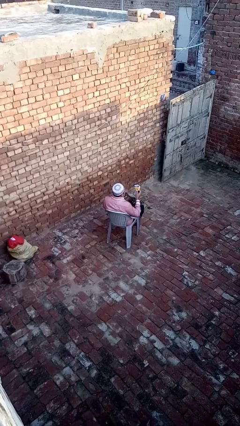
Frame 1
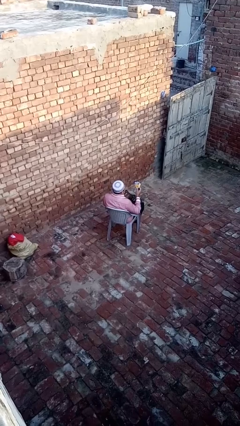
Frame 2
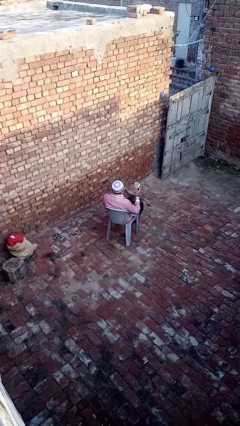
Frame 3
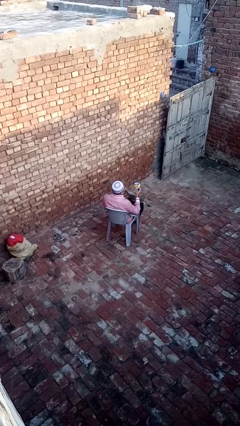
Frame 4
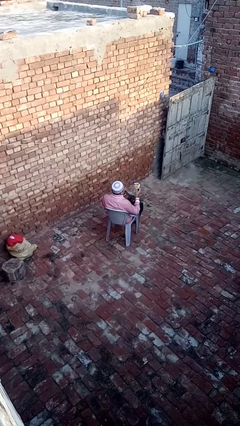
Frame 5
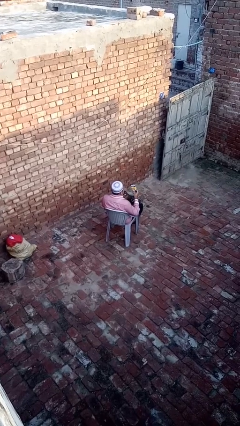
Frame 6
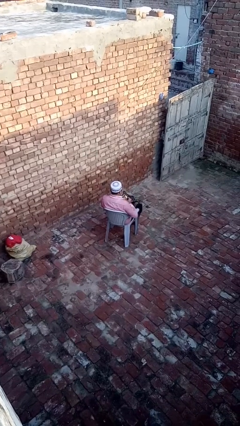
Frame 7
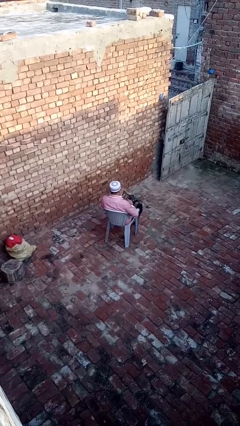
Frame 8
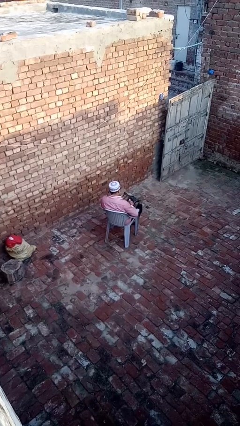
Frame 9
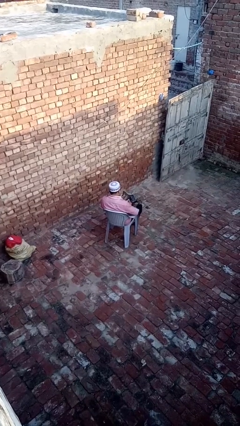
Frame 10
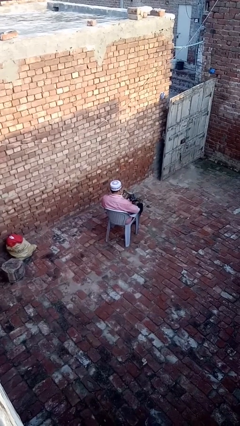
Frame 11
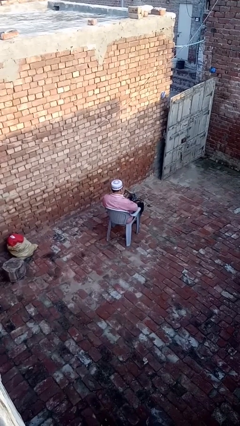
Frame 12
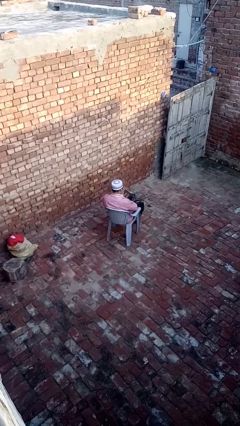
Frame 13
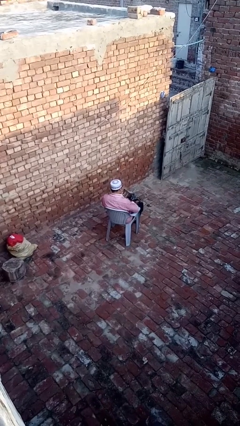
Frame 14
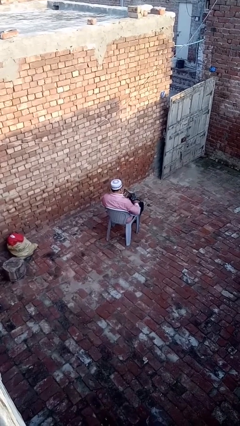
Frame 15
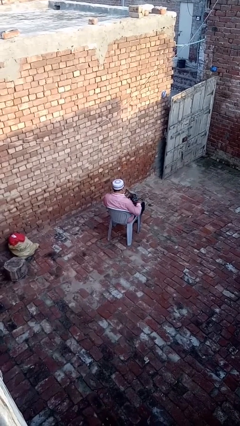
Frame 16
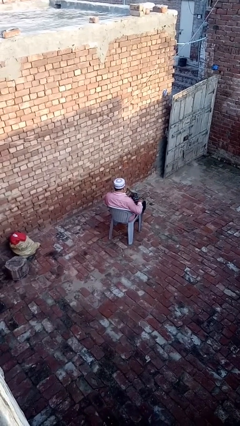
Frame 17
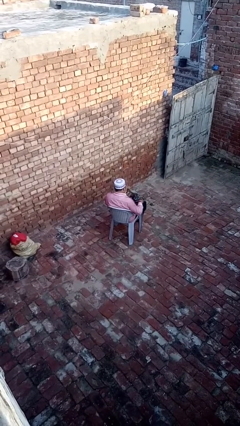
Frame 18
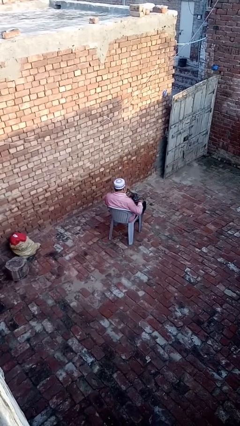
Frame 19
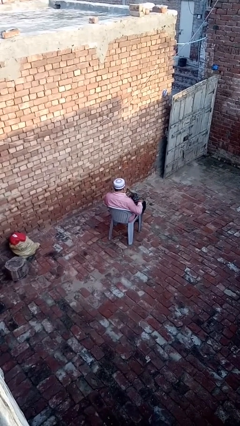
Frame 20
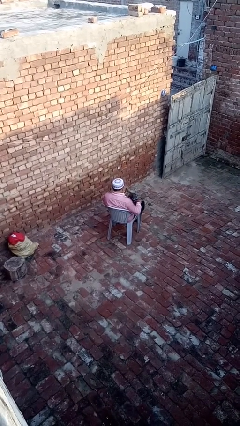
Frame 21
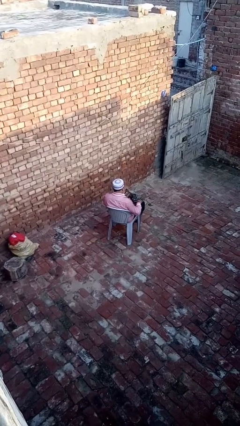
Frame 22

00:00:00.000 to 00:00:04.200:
person puts object into purse

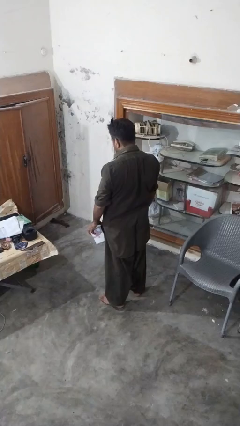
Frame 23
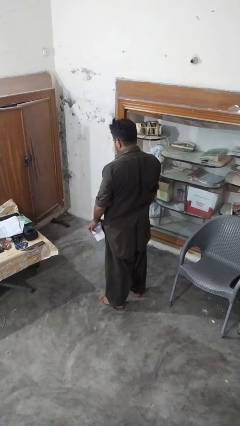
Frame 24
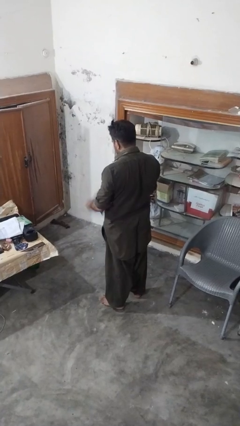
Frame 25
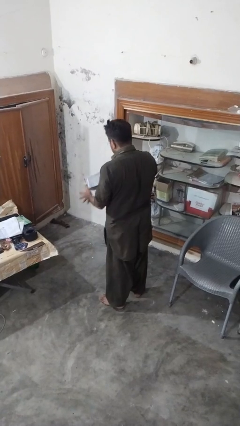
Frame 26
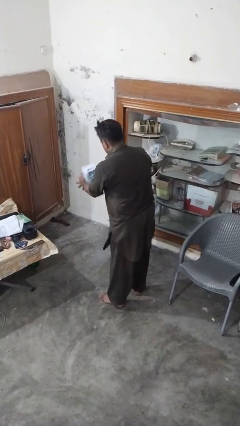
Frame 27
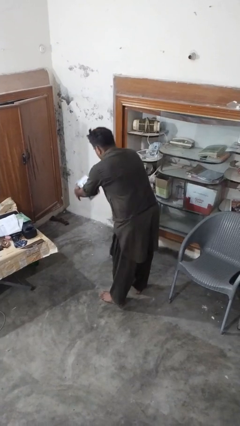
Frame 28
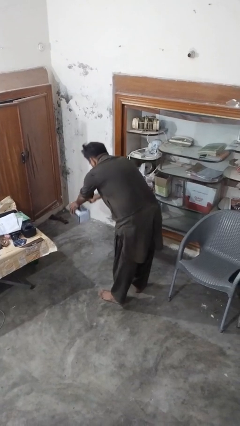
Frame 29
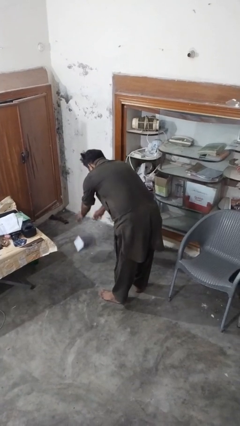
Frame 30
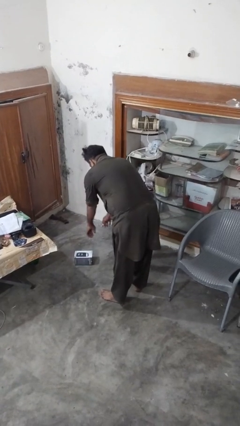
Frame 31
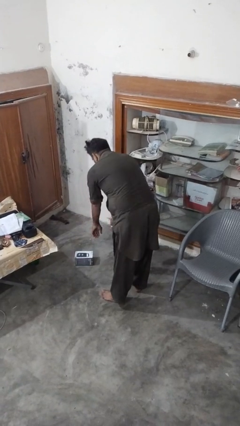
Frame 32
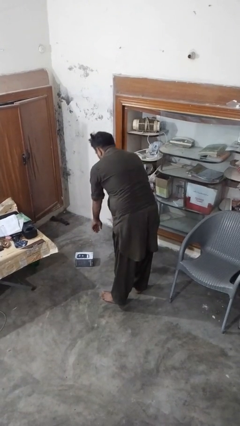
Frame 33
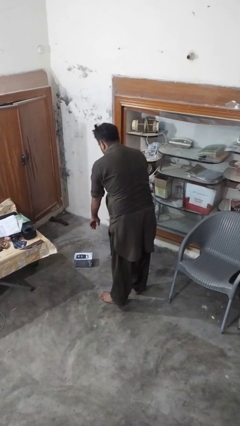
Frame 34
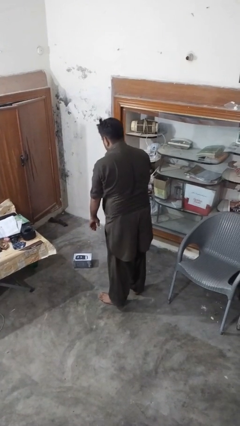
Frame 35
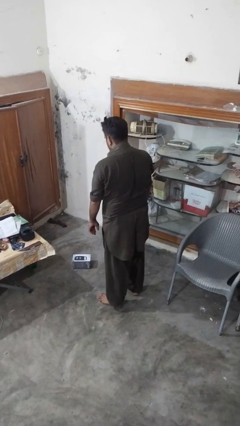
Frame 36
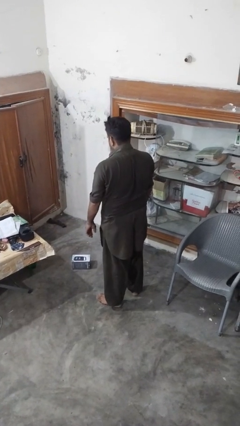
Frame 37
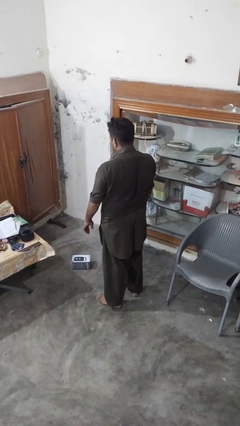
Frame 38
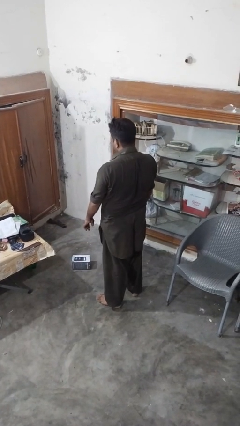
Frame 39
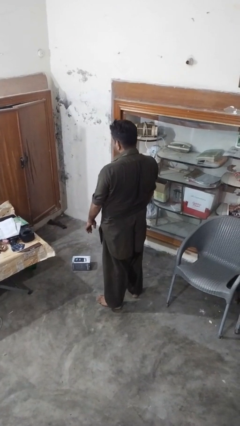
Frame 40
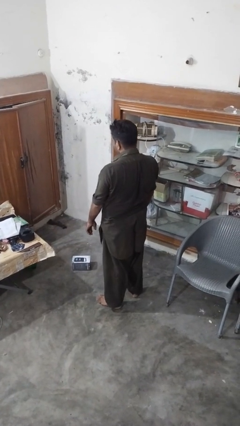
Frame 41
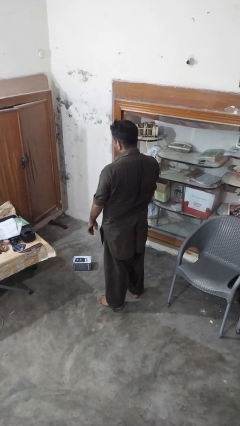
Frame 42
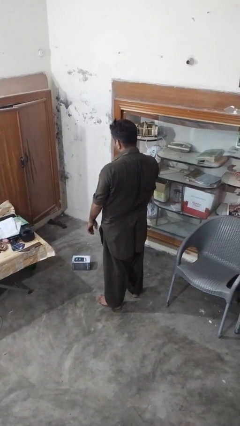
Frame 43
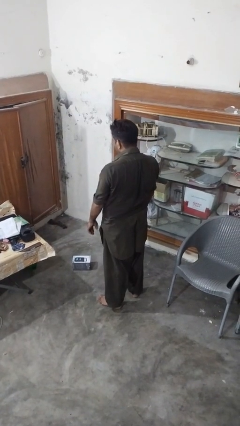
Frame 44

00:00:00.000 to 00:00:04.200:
person drops object

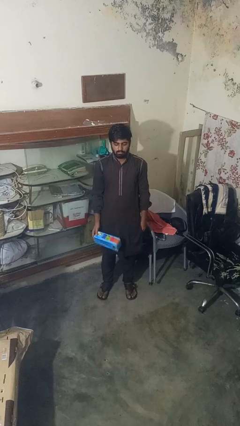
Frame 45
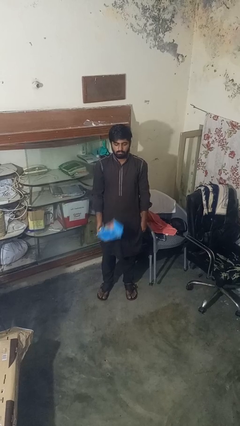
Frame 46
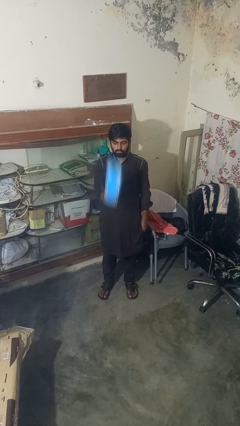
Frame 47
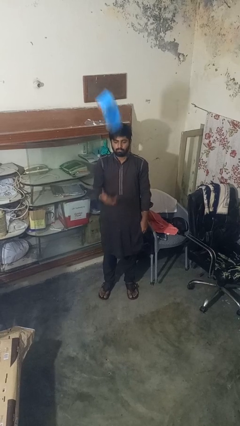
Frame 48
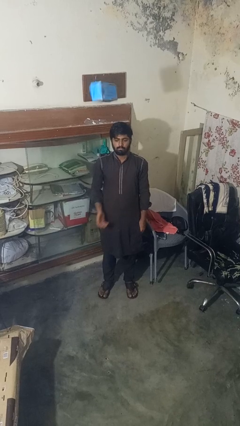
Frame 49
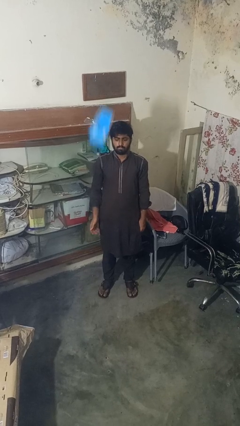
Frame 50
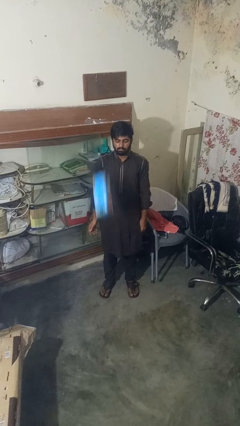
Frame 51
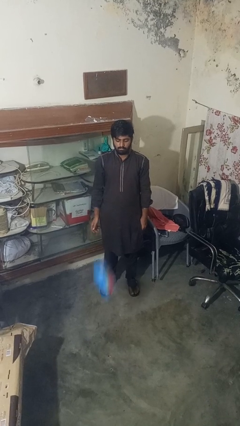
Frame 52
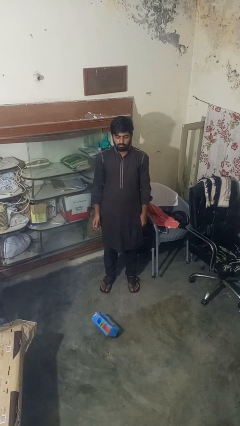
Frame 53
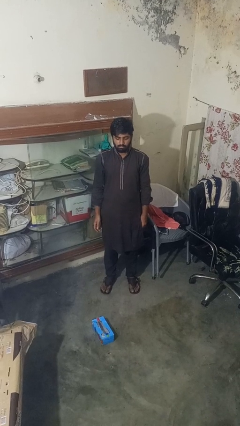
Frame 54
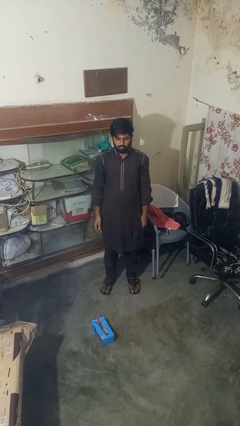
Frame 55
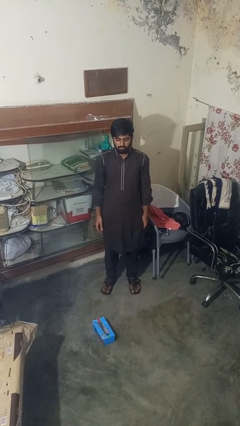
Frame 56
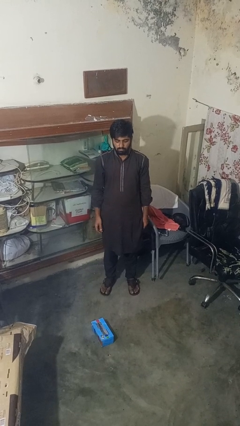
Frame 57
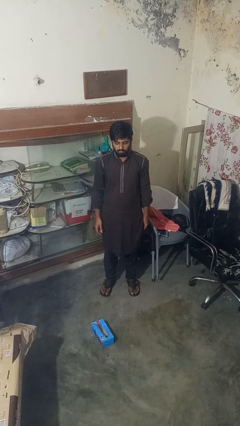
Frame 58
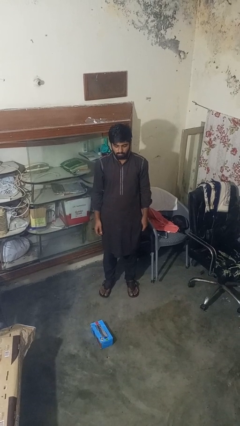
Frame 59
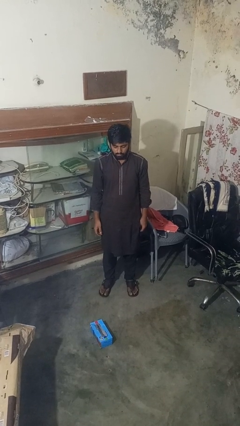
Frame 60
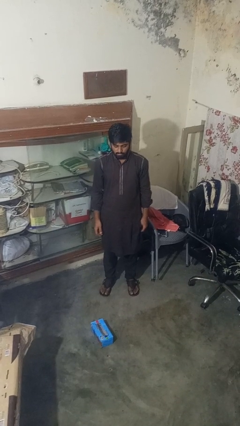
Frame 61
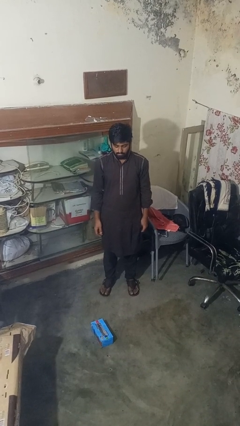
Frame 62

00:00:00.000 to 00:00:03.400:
person throws object into air

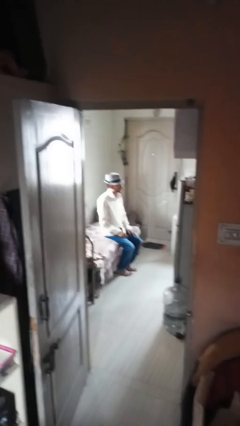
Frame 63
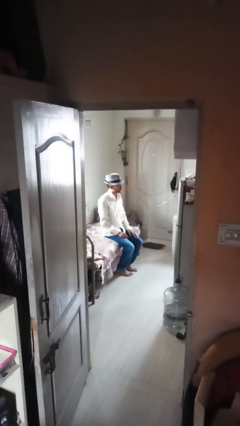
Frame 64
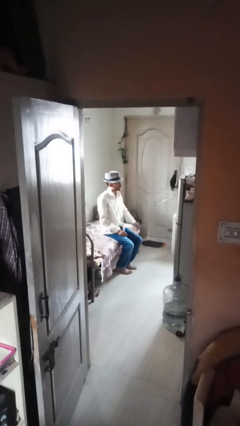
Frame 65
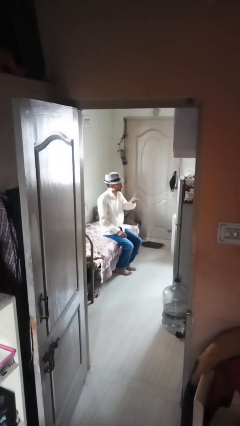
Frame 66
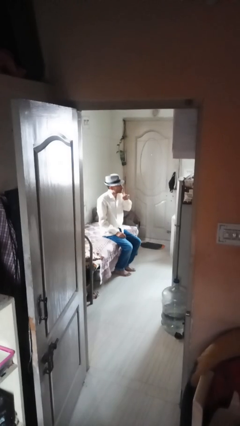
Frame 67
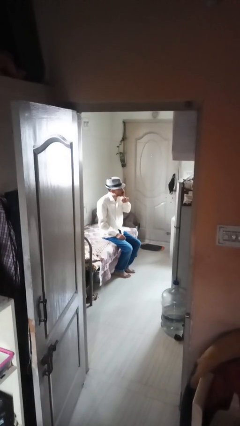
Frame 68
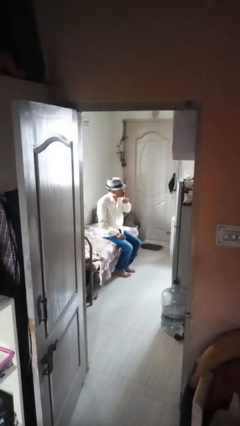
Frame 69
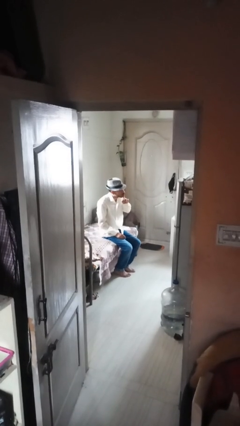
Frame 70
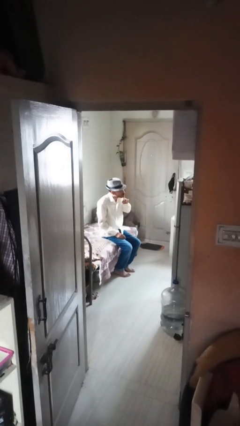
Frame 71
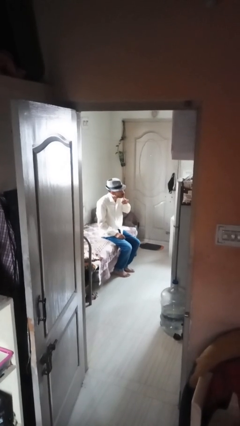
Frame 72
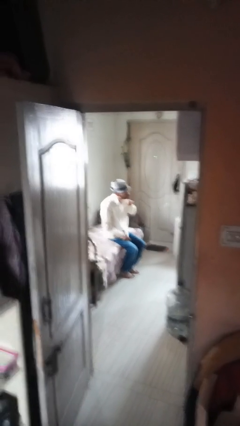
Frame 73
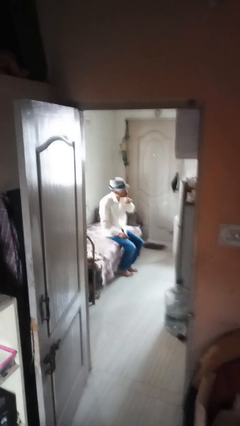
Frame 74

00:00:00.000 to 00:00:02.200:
person gestures be quiet

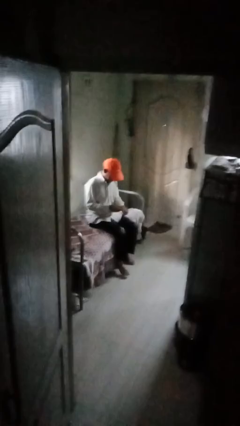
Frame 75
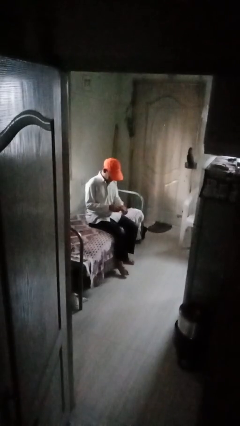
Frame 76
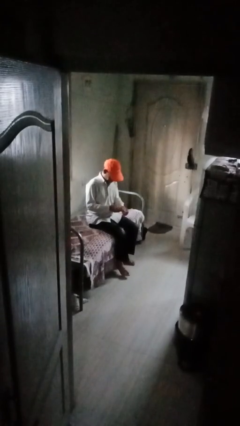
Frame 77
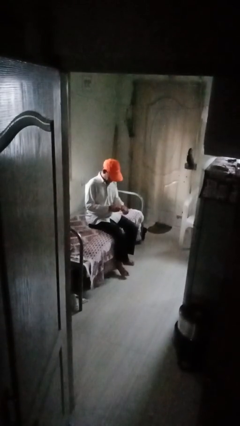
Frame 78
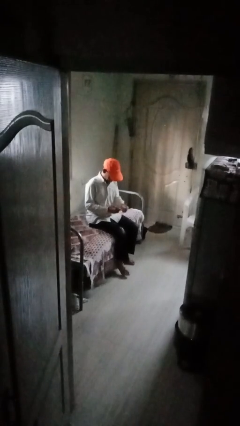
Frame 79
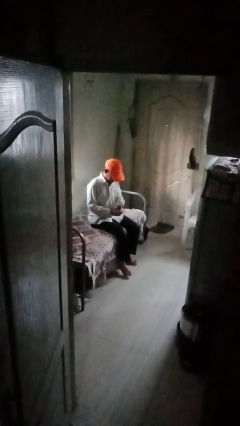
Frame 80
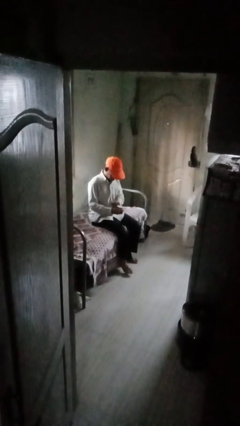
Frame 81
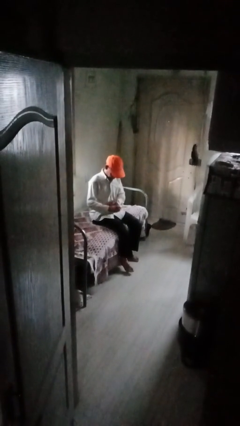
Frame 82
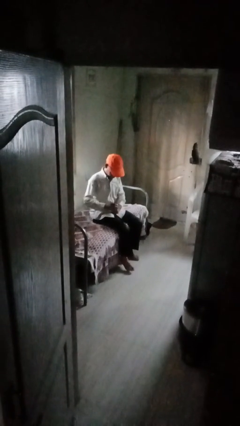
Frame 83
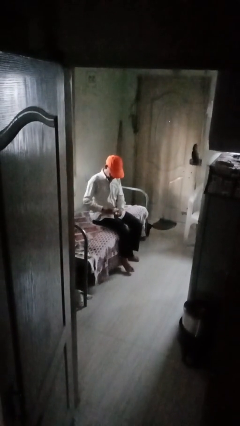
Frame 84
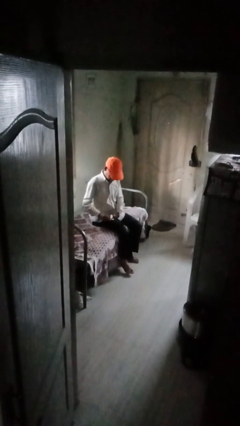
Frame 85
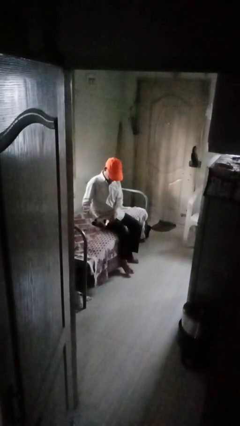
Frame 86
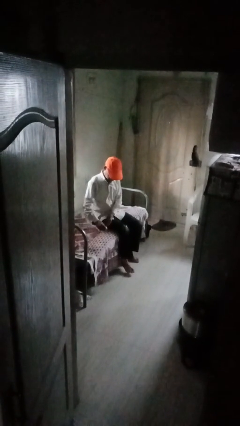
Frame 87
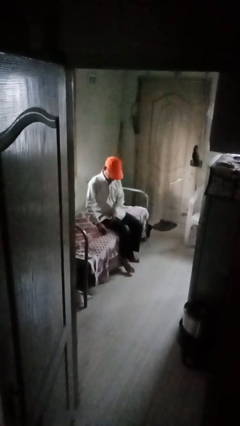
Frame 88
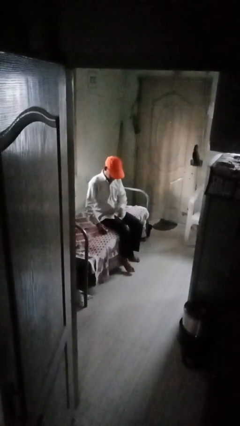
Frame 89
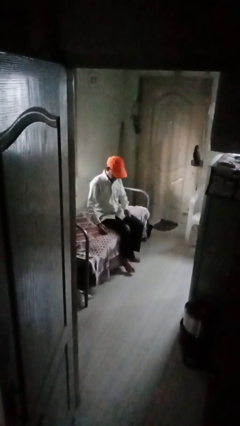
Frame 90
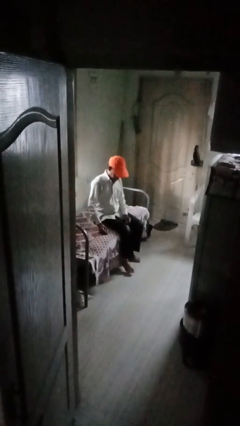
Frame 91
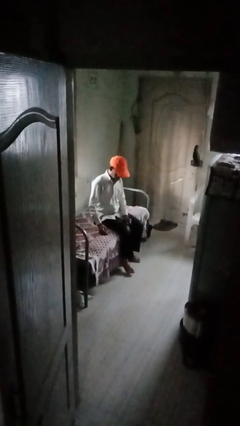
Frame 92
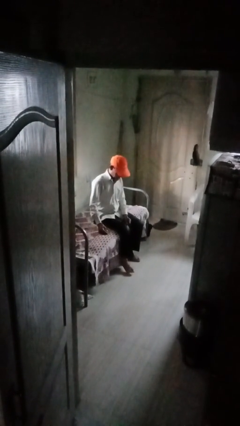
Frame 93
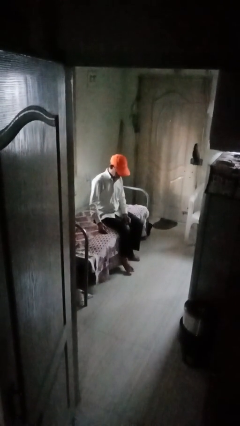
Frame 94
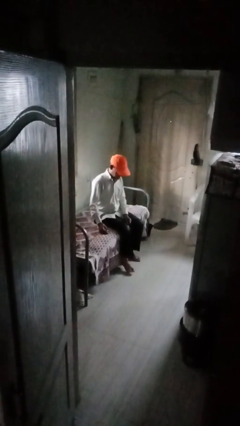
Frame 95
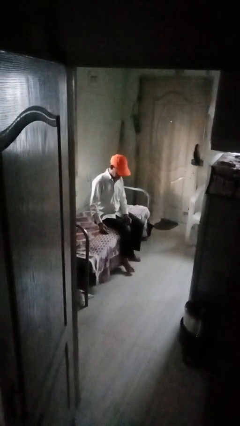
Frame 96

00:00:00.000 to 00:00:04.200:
person takes off wristwatch
